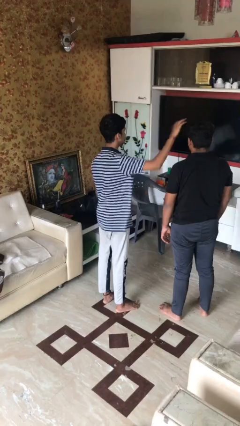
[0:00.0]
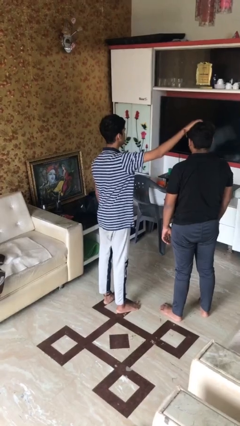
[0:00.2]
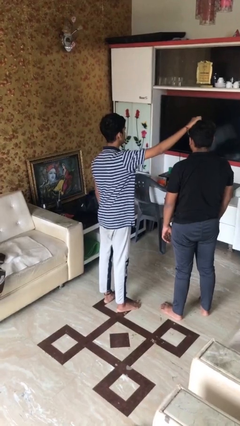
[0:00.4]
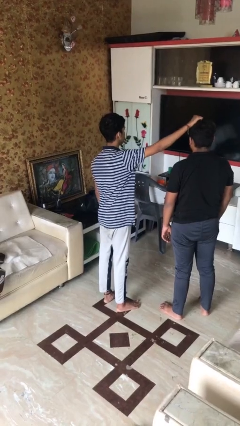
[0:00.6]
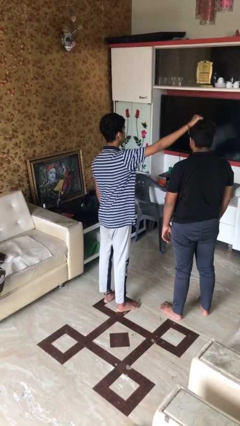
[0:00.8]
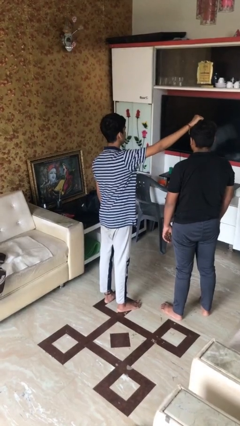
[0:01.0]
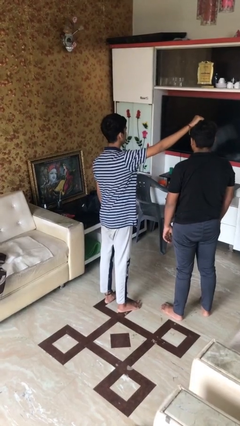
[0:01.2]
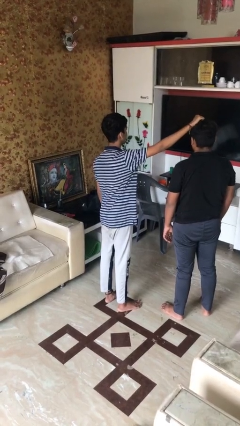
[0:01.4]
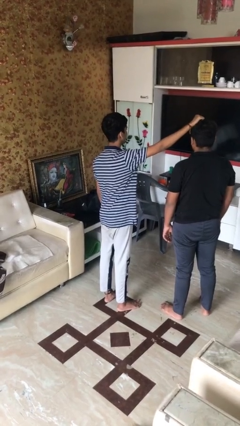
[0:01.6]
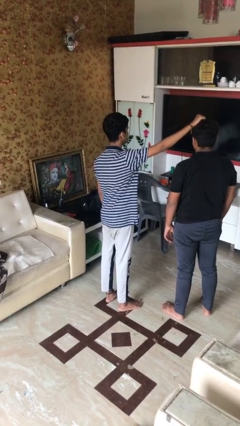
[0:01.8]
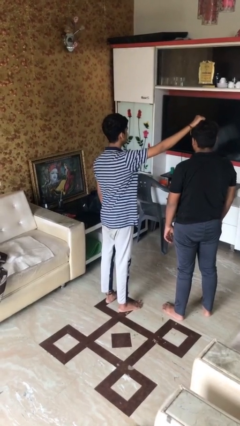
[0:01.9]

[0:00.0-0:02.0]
person grabs person by hair

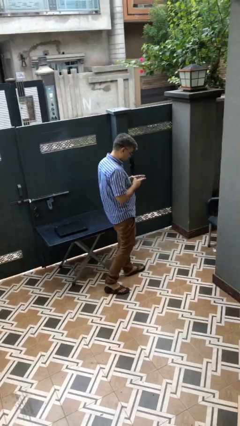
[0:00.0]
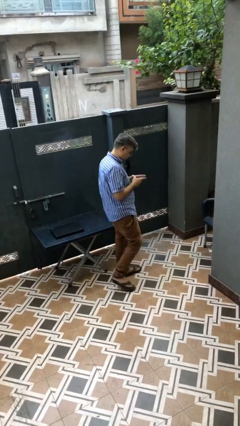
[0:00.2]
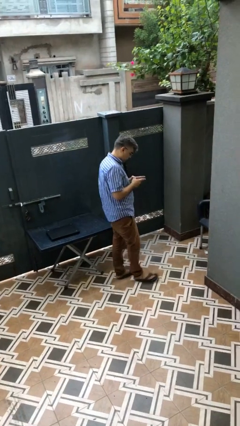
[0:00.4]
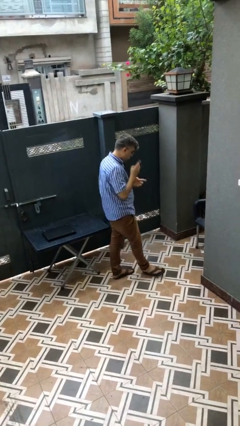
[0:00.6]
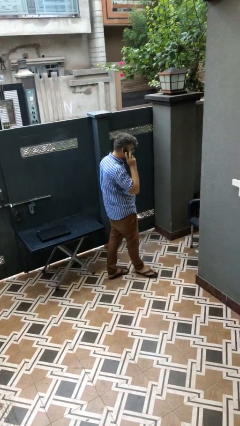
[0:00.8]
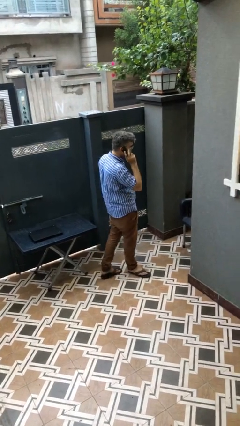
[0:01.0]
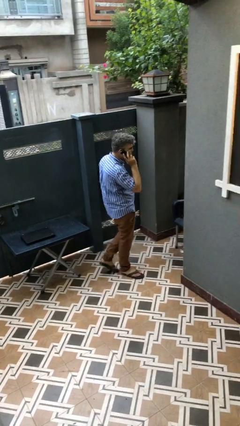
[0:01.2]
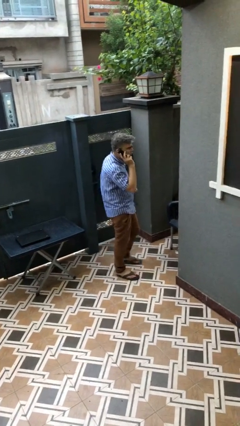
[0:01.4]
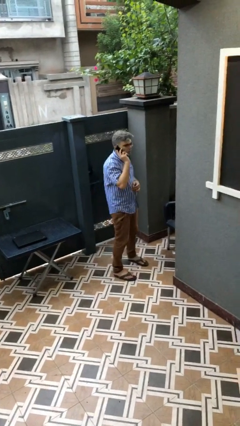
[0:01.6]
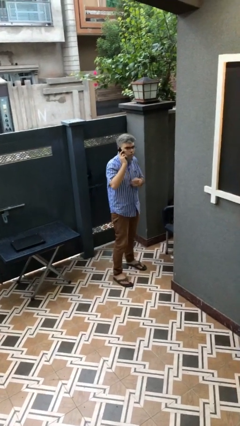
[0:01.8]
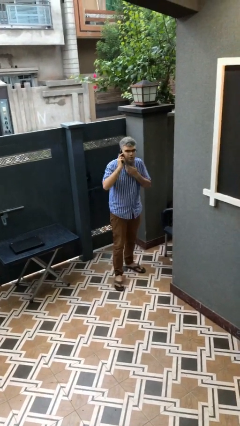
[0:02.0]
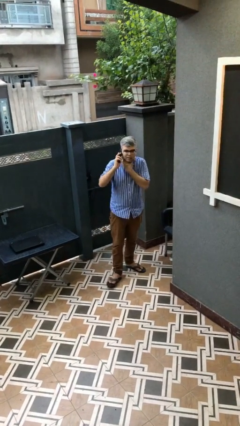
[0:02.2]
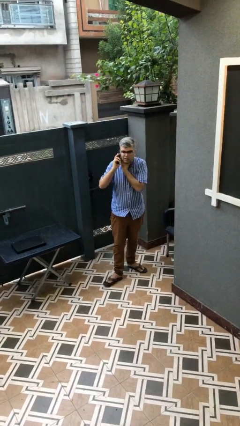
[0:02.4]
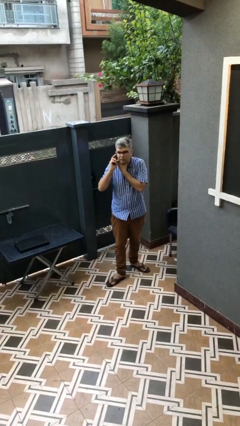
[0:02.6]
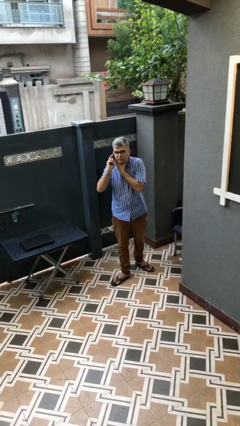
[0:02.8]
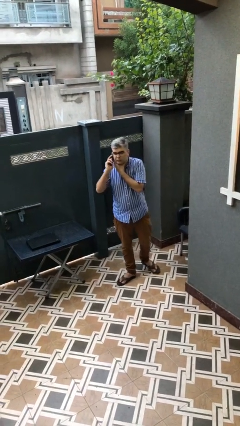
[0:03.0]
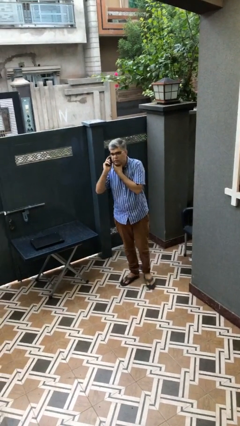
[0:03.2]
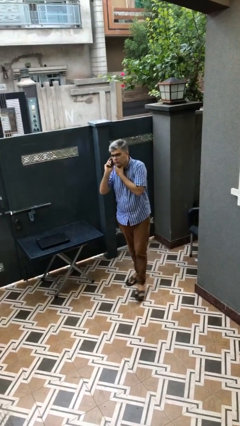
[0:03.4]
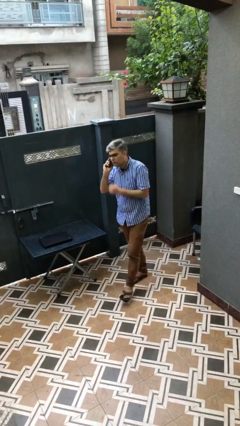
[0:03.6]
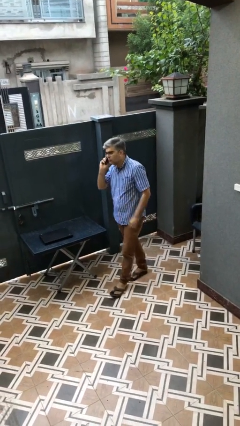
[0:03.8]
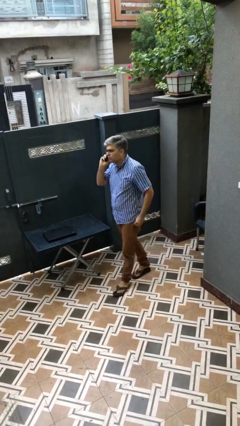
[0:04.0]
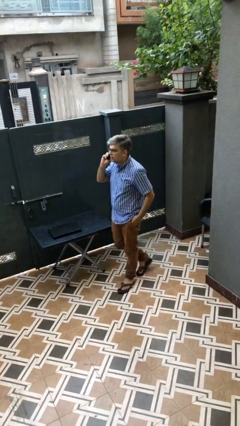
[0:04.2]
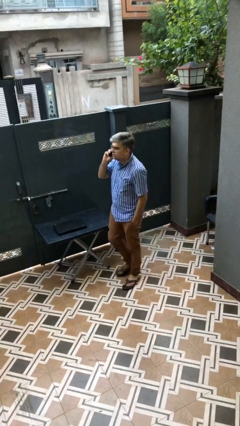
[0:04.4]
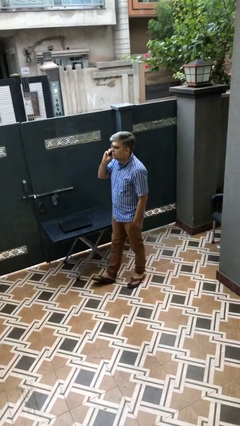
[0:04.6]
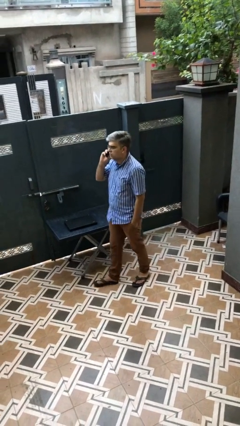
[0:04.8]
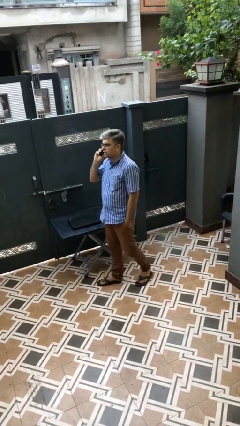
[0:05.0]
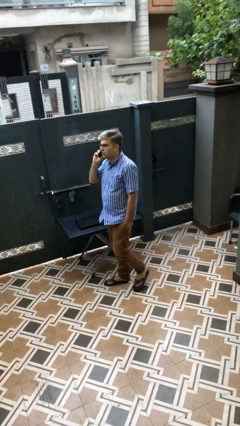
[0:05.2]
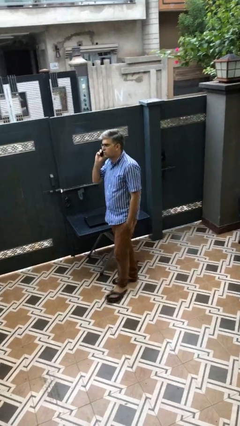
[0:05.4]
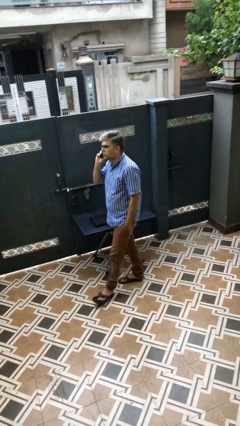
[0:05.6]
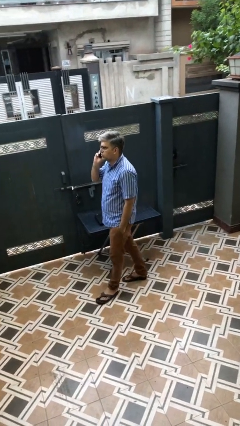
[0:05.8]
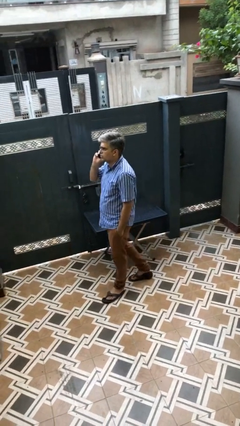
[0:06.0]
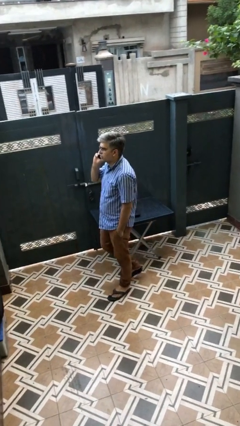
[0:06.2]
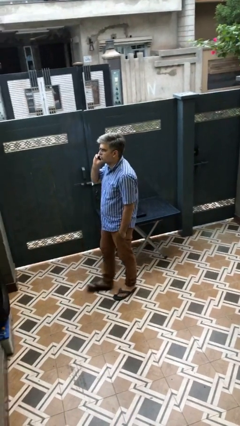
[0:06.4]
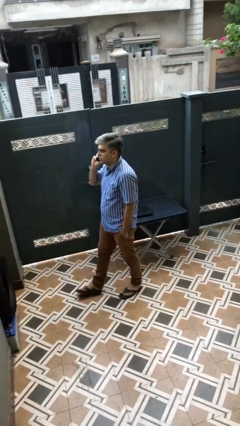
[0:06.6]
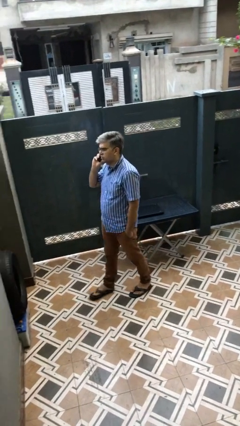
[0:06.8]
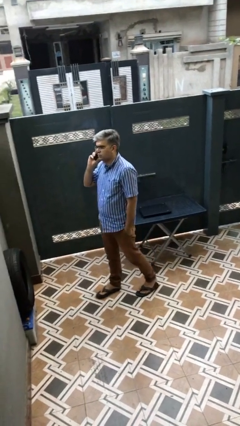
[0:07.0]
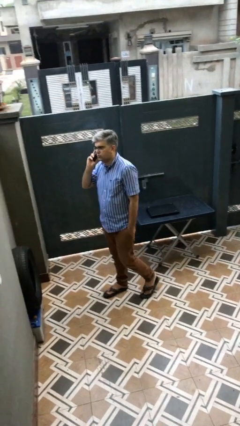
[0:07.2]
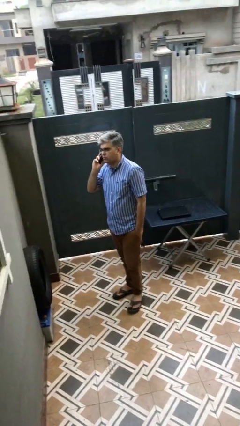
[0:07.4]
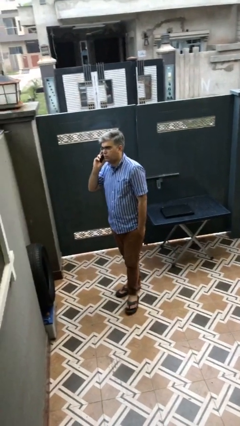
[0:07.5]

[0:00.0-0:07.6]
person talks on phone

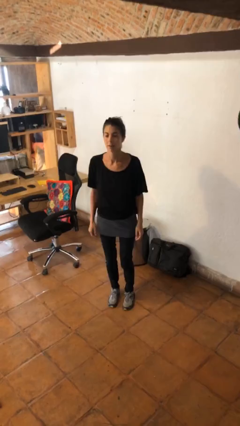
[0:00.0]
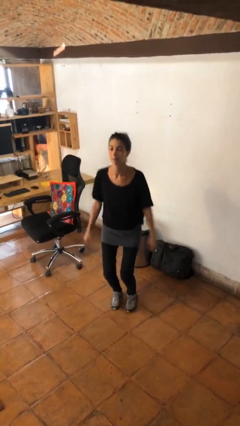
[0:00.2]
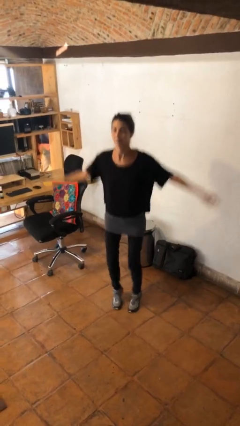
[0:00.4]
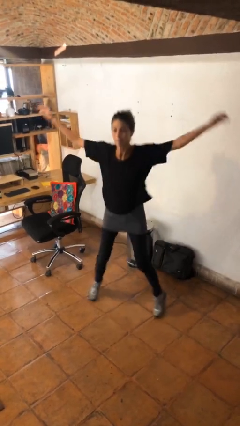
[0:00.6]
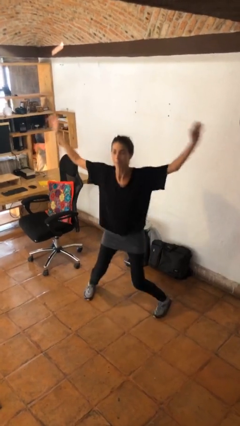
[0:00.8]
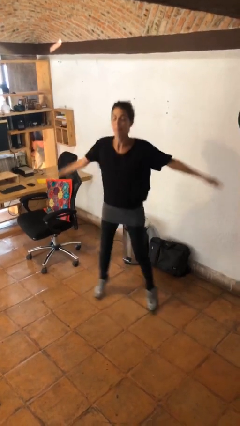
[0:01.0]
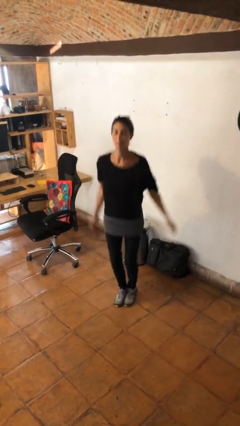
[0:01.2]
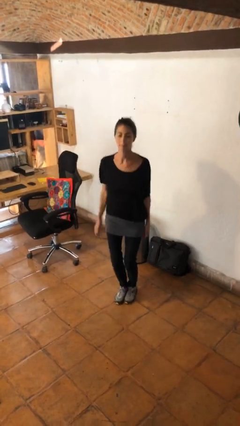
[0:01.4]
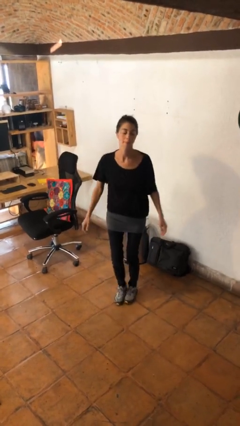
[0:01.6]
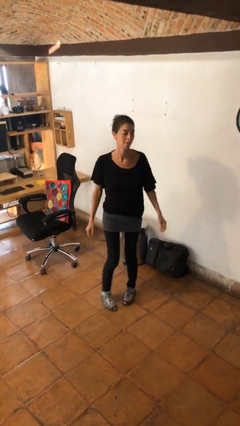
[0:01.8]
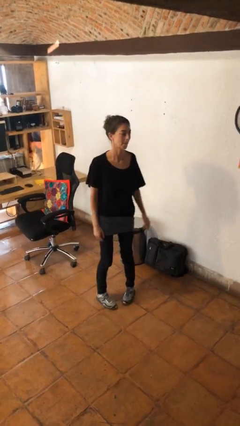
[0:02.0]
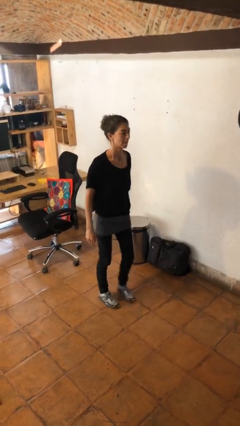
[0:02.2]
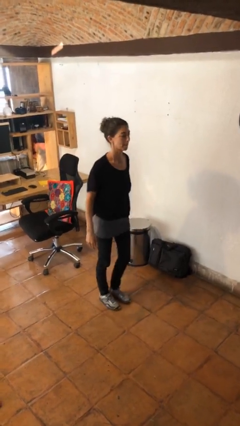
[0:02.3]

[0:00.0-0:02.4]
person exercises with jumping jacks

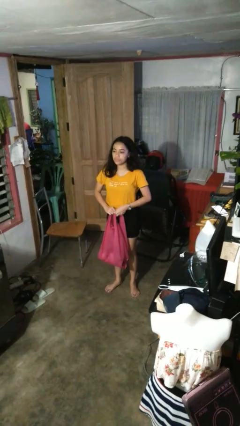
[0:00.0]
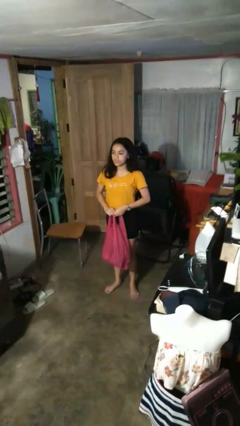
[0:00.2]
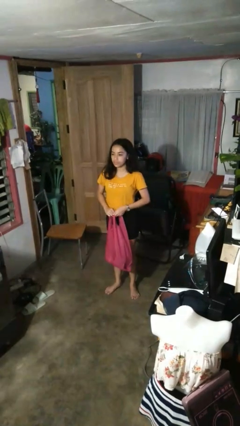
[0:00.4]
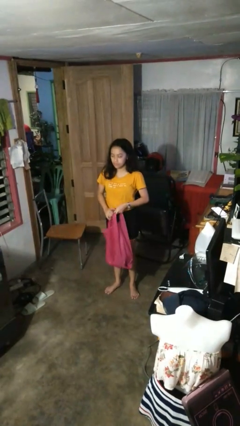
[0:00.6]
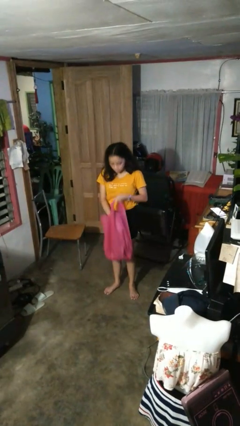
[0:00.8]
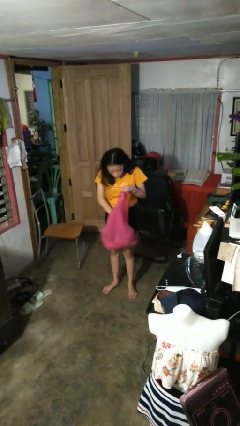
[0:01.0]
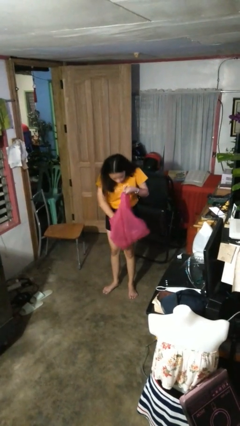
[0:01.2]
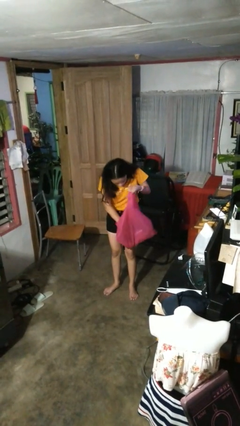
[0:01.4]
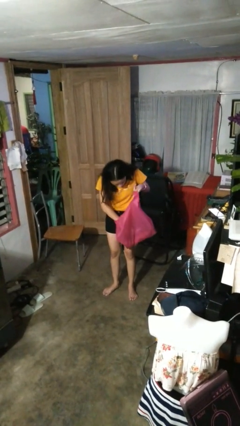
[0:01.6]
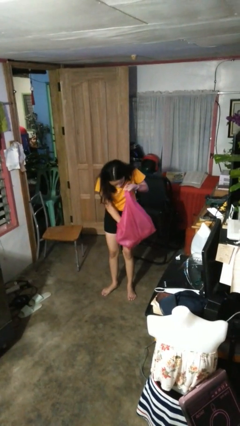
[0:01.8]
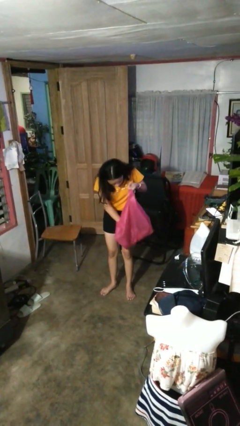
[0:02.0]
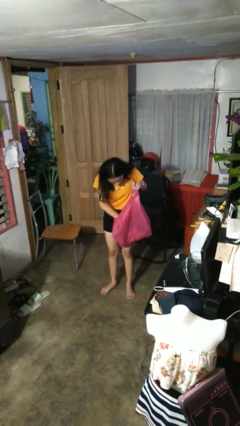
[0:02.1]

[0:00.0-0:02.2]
person searches in bag

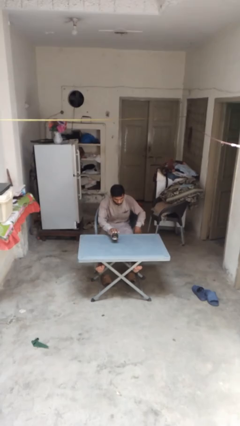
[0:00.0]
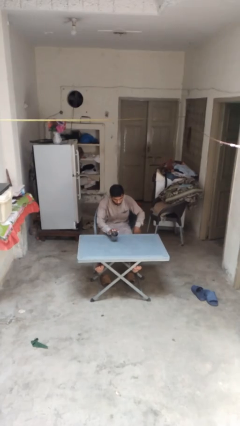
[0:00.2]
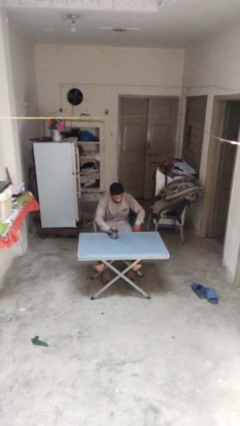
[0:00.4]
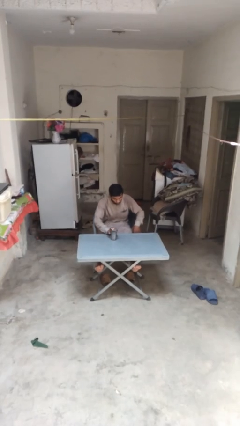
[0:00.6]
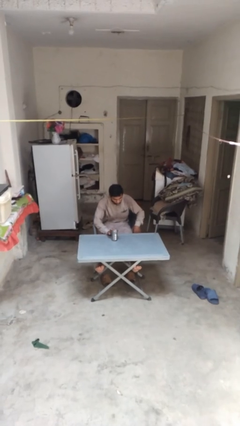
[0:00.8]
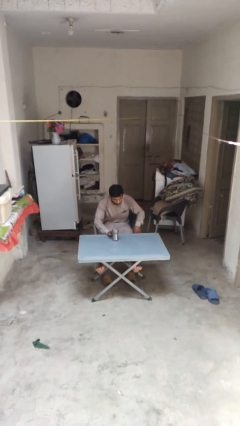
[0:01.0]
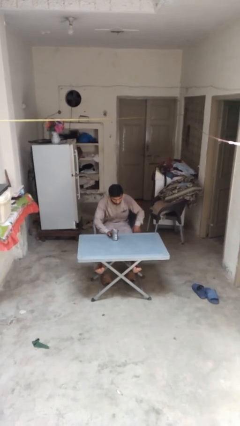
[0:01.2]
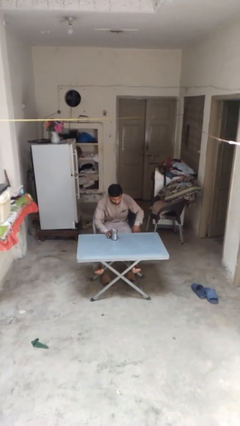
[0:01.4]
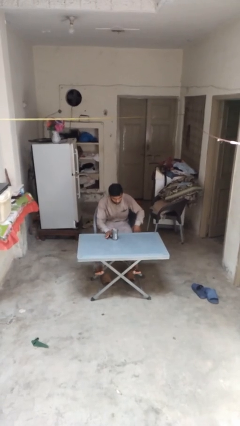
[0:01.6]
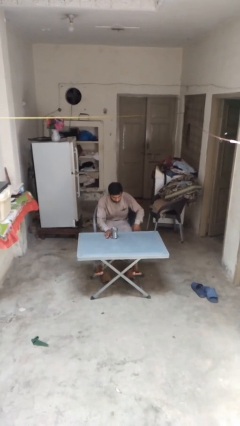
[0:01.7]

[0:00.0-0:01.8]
person sets upright glass

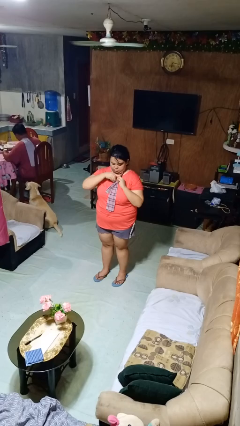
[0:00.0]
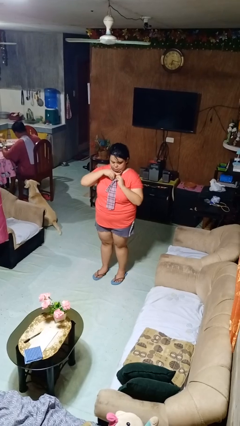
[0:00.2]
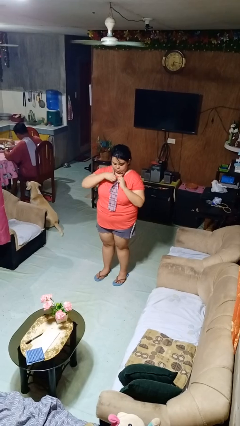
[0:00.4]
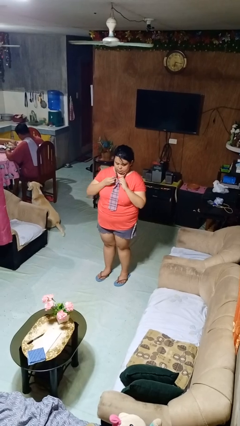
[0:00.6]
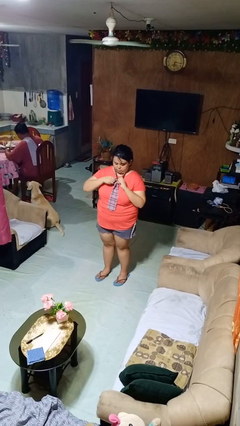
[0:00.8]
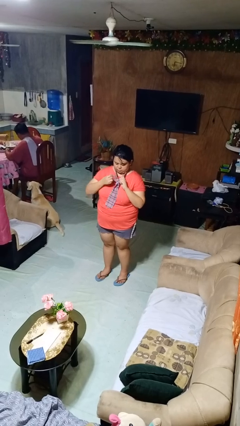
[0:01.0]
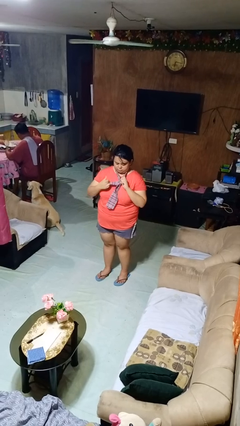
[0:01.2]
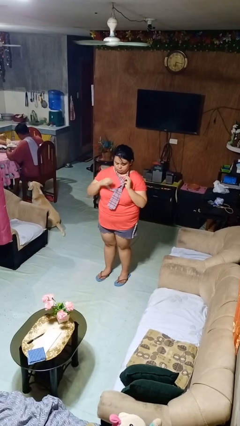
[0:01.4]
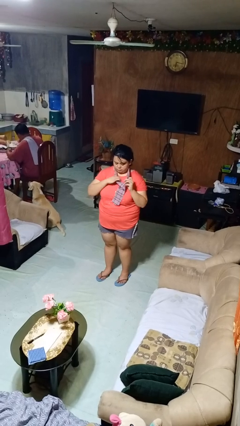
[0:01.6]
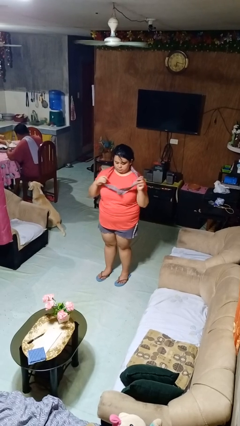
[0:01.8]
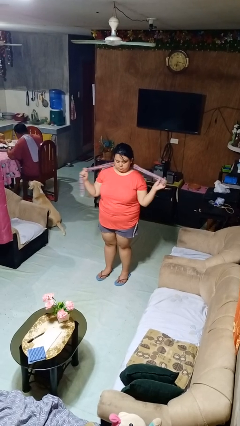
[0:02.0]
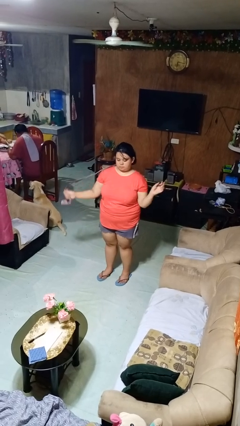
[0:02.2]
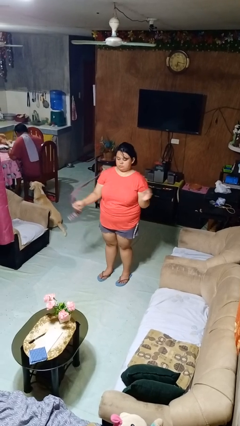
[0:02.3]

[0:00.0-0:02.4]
person takes off necktie
